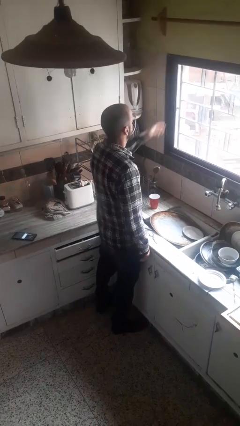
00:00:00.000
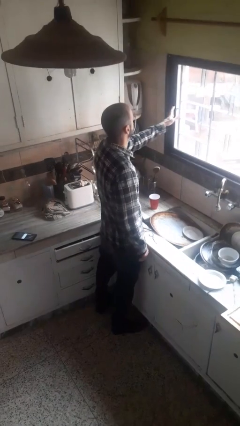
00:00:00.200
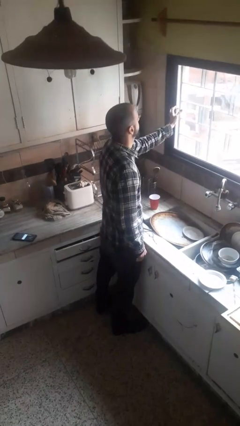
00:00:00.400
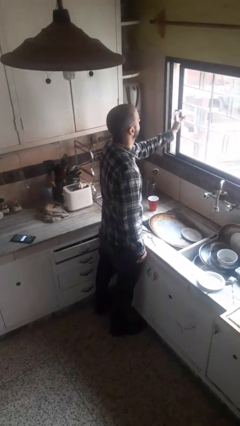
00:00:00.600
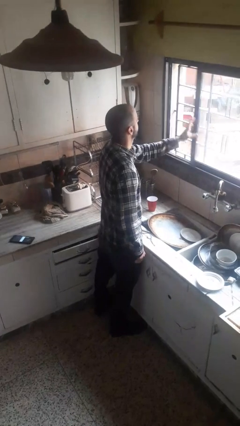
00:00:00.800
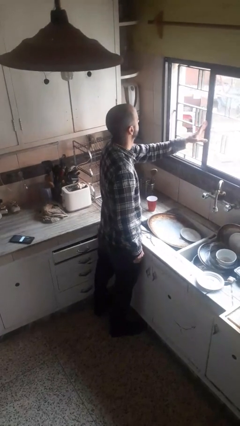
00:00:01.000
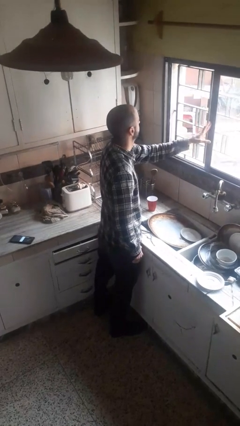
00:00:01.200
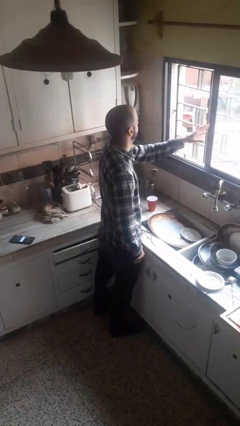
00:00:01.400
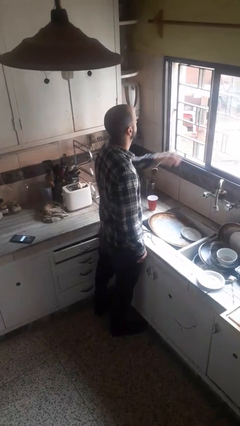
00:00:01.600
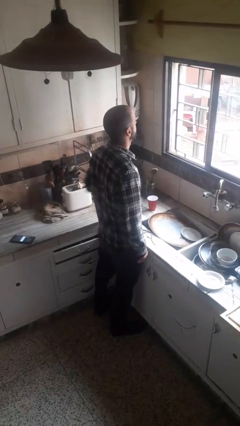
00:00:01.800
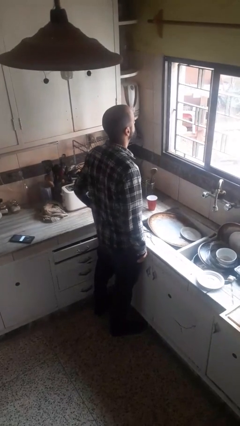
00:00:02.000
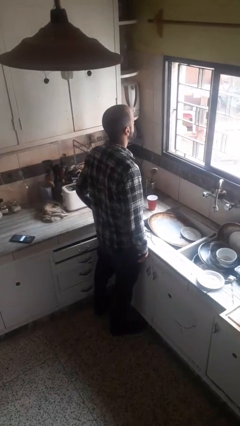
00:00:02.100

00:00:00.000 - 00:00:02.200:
person opens home window

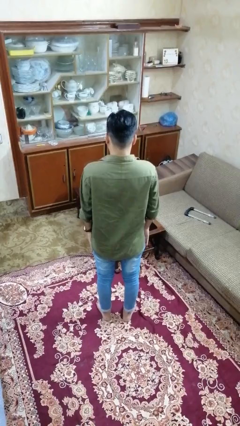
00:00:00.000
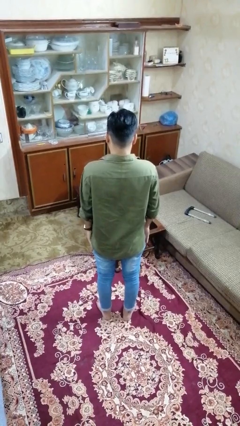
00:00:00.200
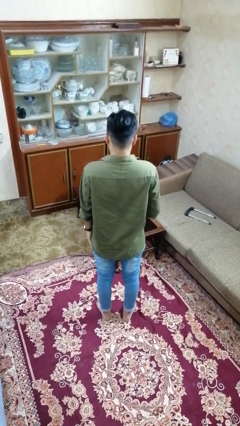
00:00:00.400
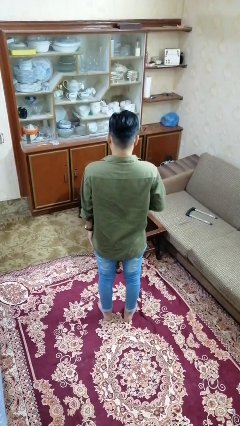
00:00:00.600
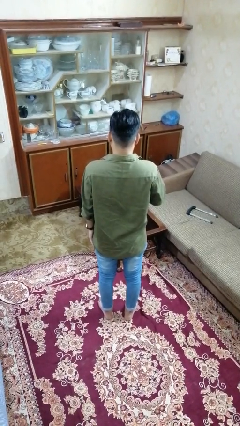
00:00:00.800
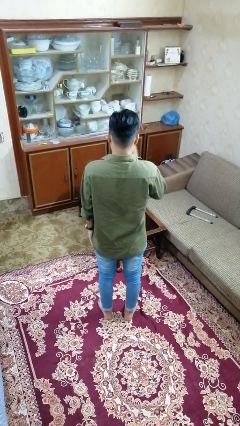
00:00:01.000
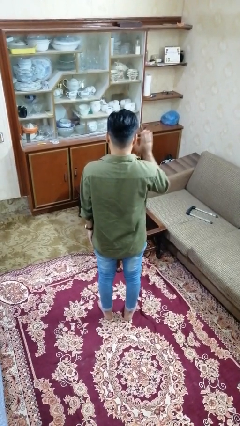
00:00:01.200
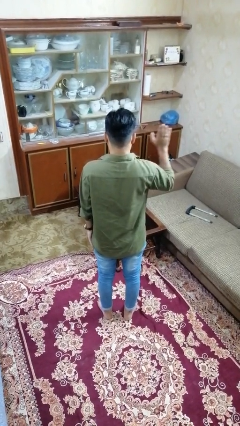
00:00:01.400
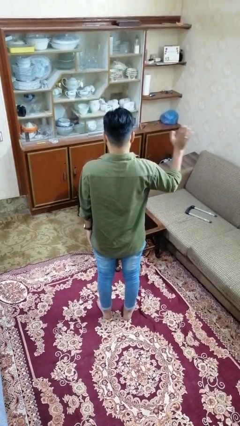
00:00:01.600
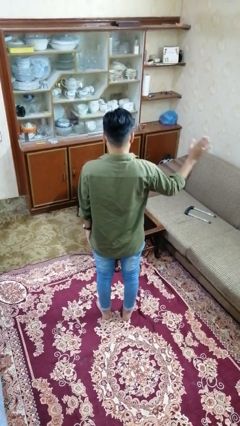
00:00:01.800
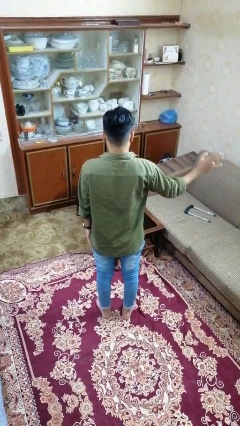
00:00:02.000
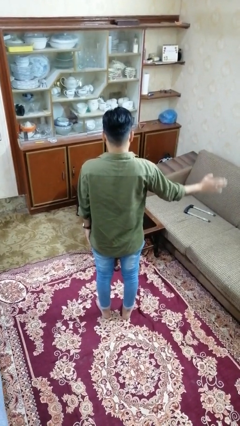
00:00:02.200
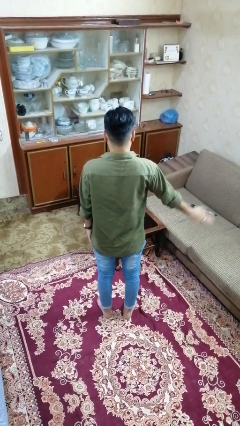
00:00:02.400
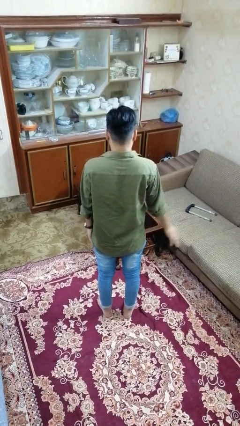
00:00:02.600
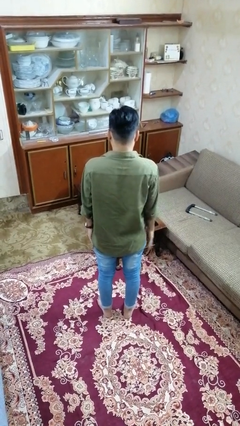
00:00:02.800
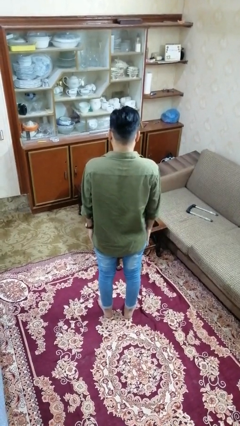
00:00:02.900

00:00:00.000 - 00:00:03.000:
person gestures swipe right

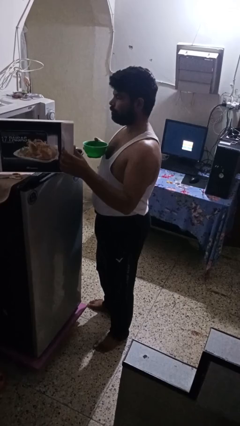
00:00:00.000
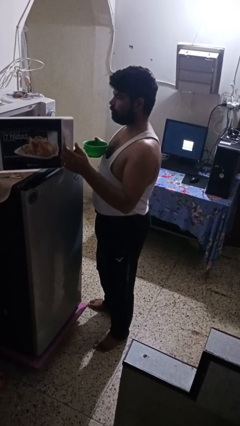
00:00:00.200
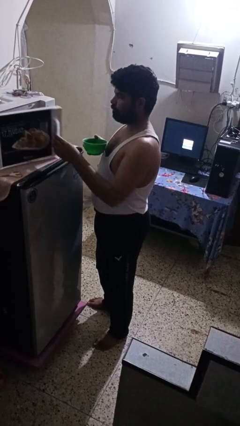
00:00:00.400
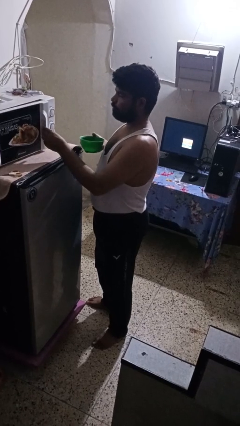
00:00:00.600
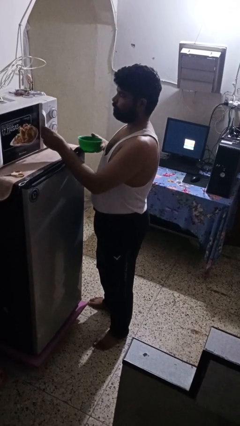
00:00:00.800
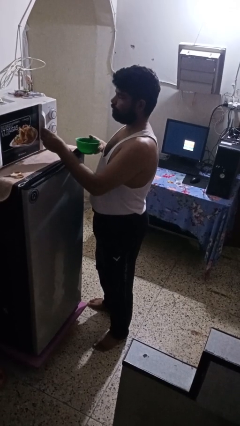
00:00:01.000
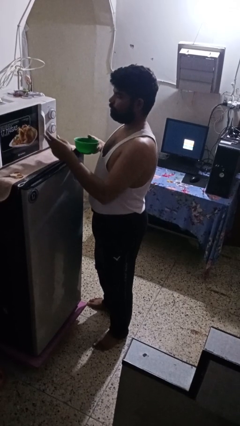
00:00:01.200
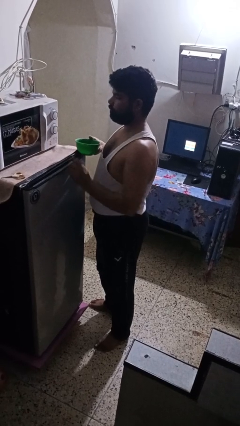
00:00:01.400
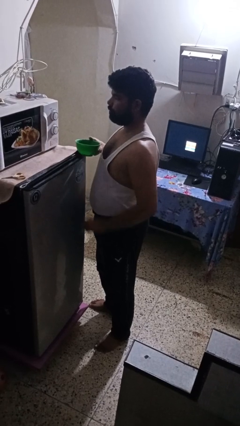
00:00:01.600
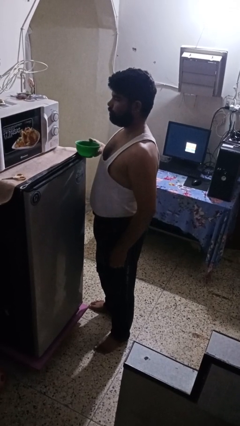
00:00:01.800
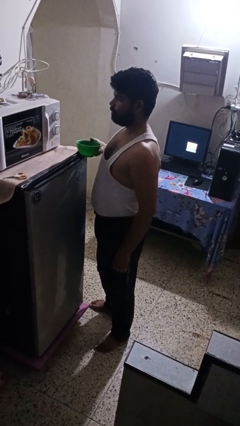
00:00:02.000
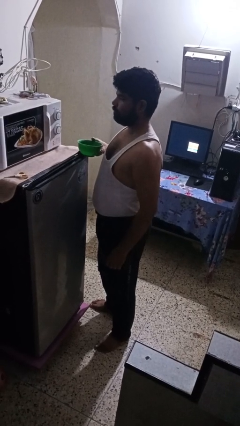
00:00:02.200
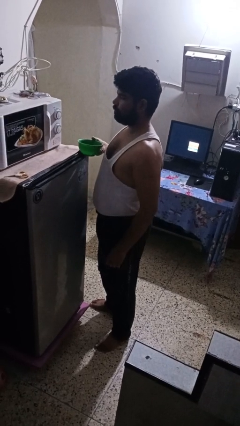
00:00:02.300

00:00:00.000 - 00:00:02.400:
person closes microwave

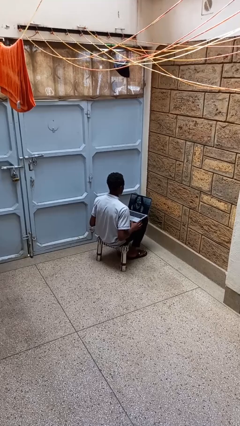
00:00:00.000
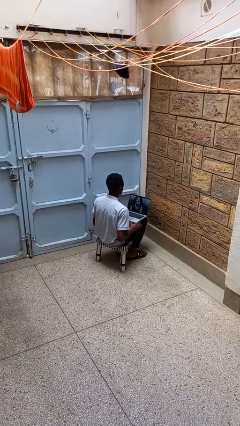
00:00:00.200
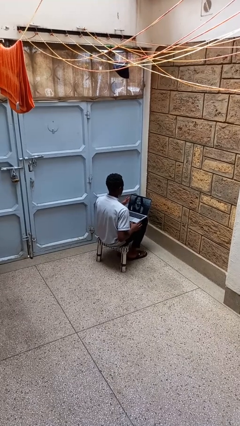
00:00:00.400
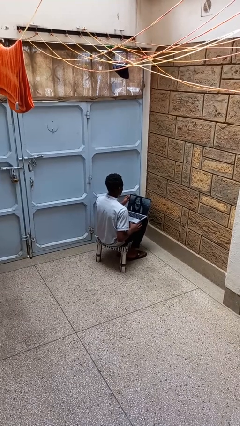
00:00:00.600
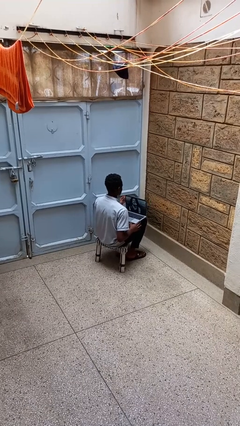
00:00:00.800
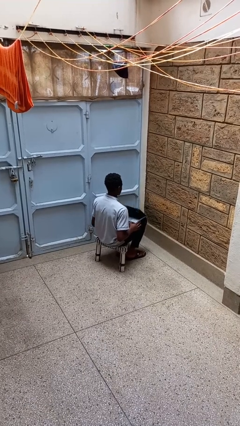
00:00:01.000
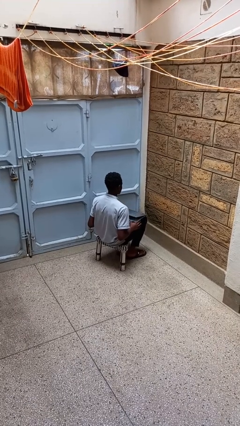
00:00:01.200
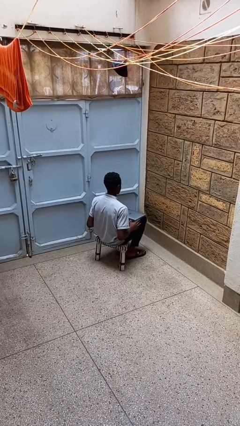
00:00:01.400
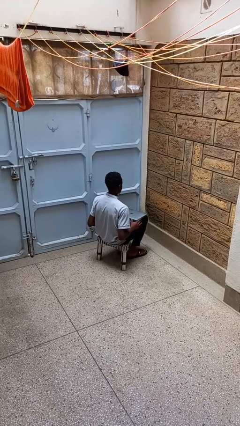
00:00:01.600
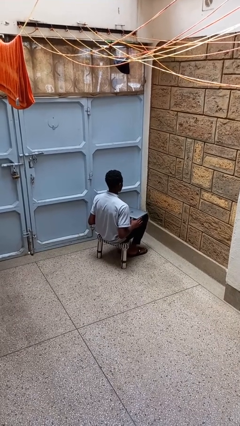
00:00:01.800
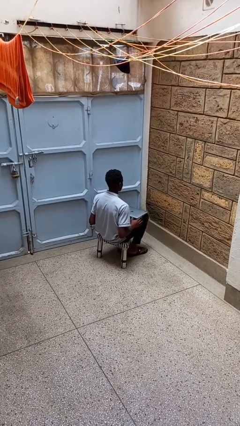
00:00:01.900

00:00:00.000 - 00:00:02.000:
person closes laptop

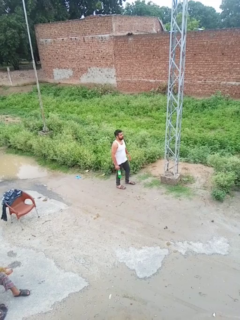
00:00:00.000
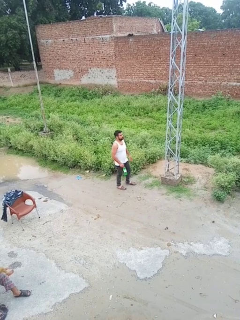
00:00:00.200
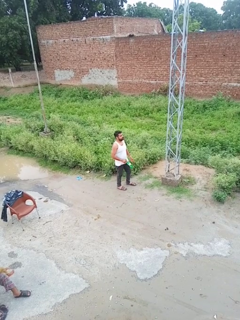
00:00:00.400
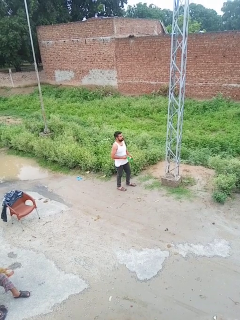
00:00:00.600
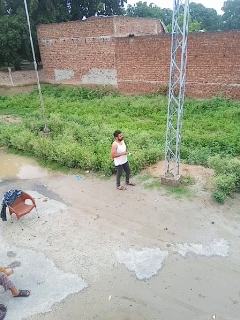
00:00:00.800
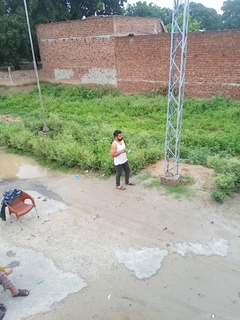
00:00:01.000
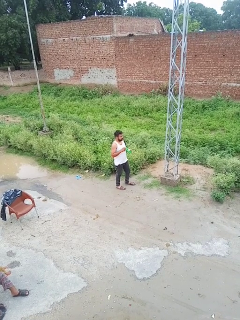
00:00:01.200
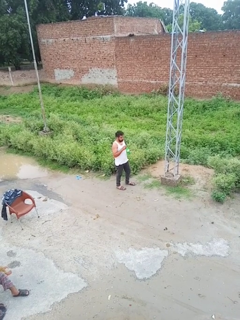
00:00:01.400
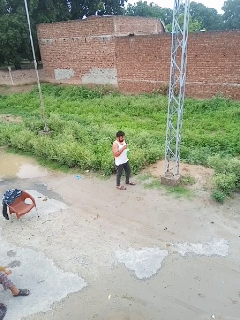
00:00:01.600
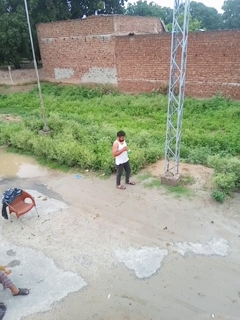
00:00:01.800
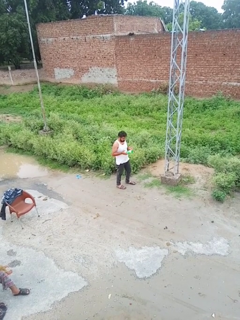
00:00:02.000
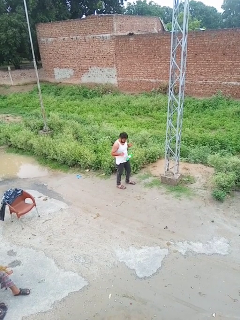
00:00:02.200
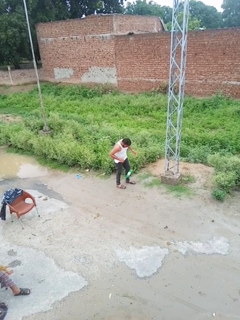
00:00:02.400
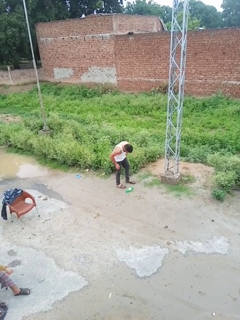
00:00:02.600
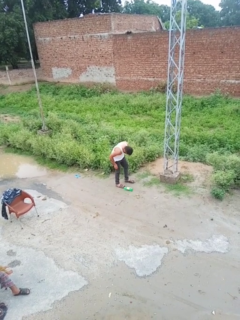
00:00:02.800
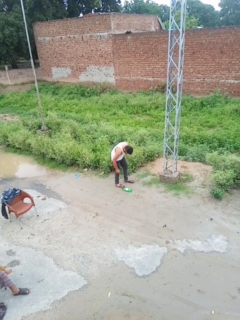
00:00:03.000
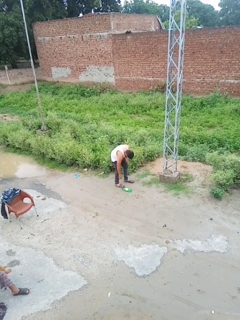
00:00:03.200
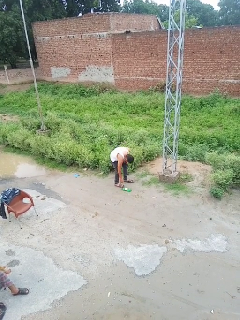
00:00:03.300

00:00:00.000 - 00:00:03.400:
person drops object

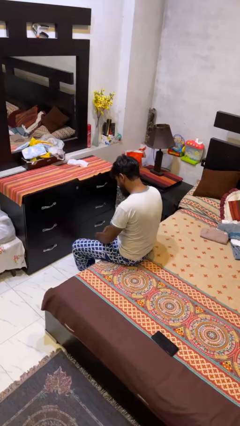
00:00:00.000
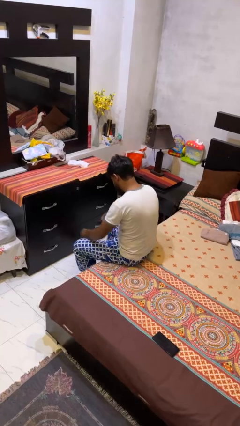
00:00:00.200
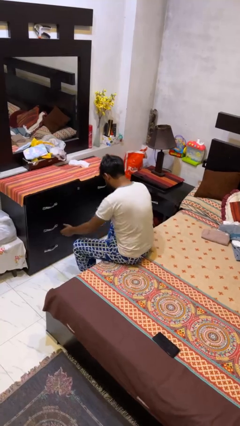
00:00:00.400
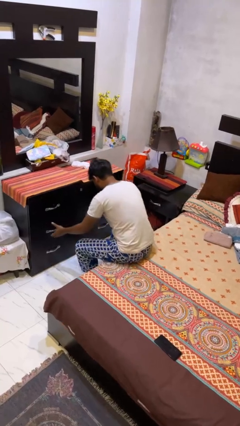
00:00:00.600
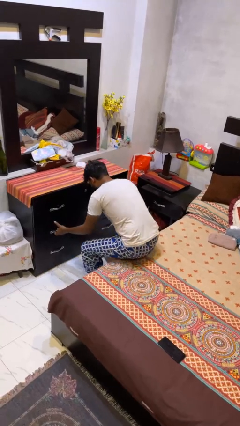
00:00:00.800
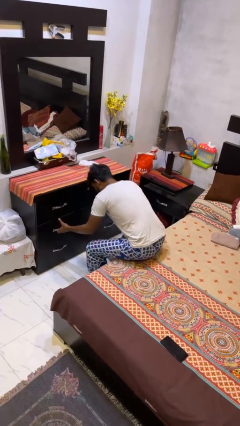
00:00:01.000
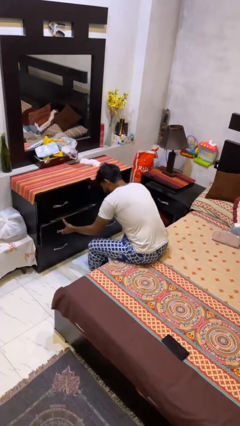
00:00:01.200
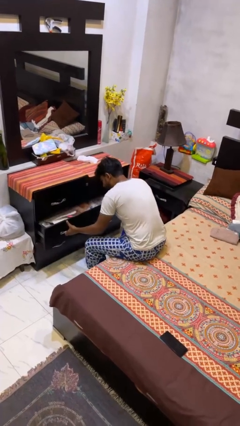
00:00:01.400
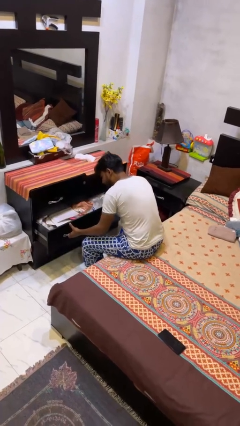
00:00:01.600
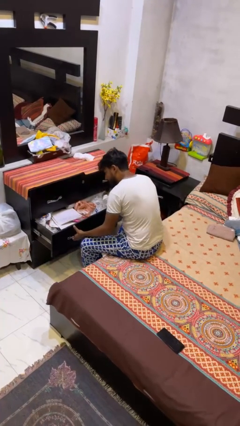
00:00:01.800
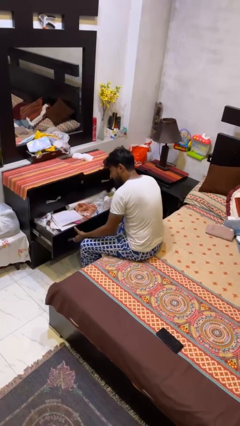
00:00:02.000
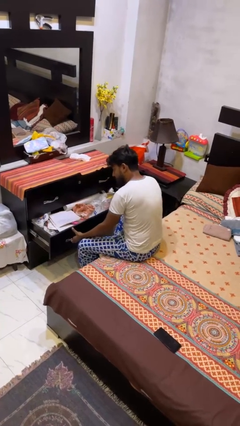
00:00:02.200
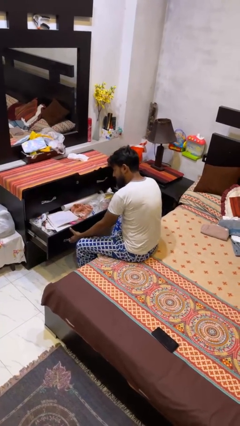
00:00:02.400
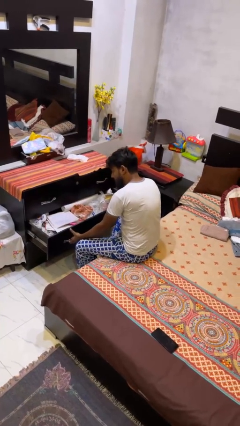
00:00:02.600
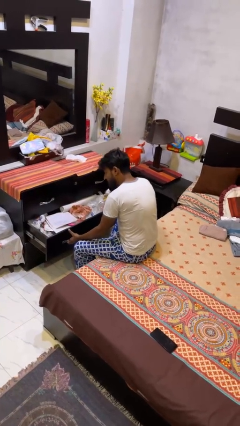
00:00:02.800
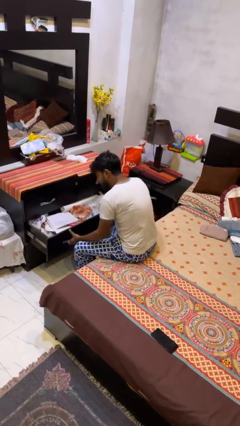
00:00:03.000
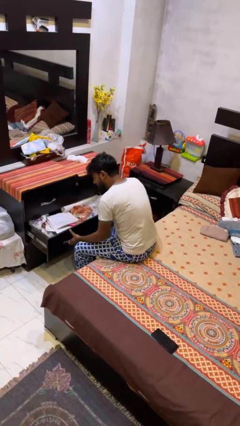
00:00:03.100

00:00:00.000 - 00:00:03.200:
person opens dresser drawer

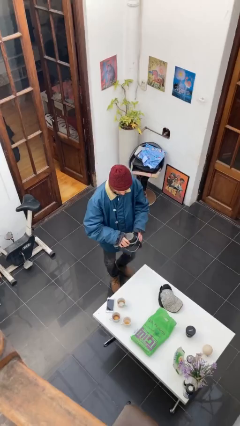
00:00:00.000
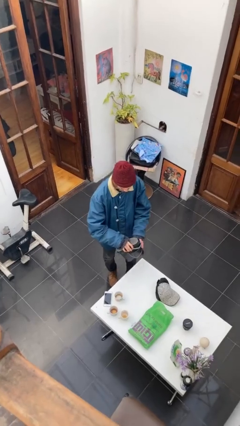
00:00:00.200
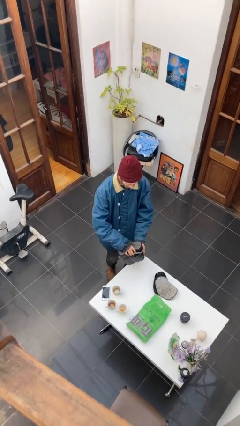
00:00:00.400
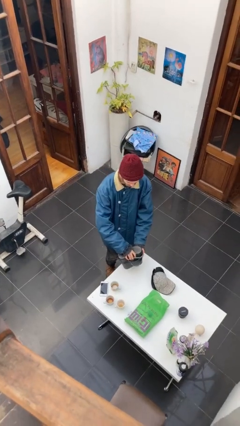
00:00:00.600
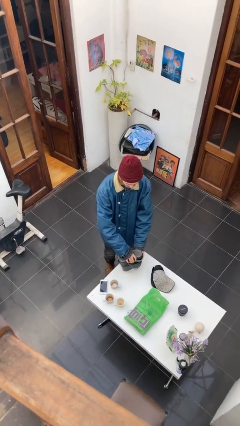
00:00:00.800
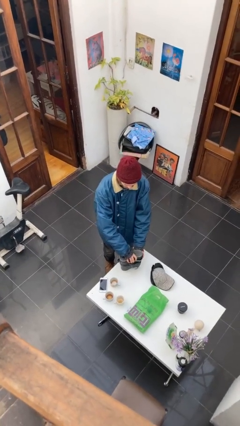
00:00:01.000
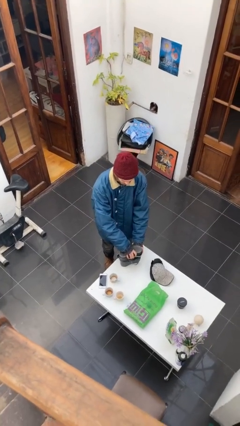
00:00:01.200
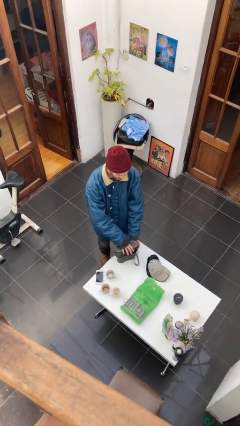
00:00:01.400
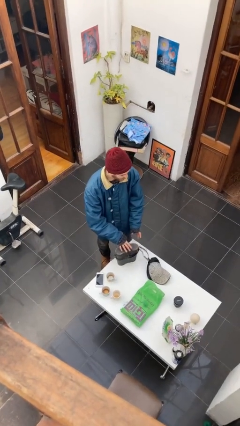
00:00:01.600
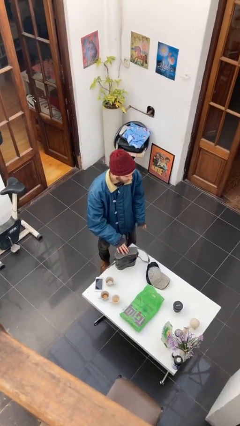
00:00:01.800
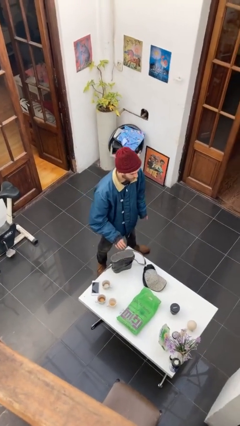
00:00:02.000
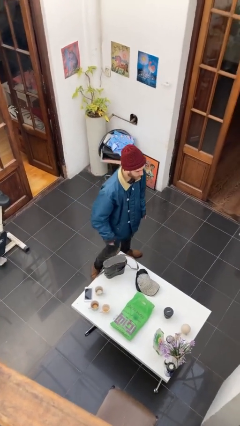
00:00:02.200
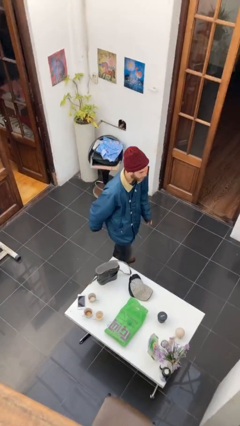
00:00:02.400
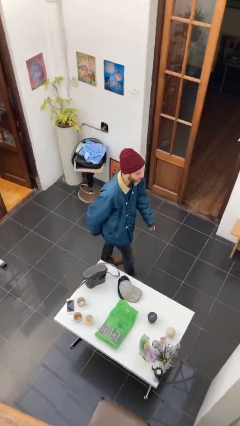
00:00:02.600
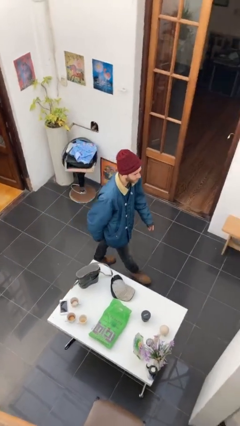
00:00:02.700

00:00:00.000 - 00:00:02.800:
person puts down object on table
